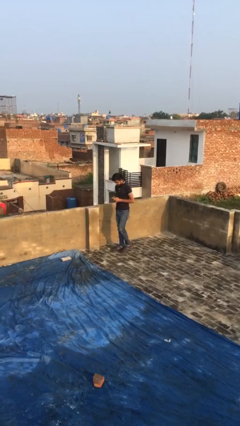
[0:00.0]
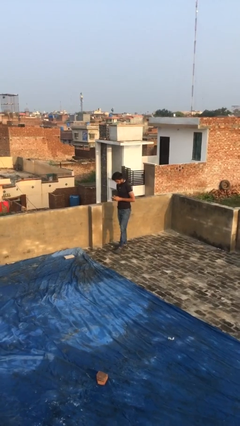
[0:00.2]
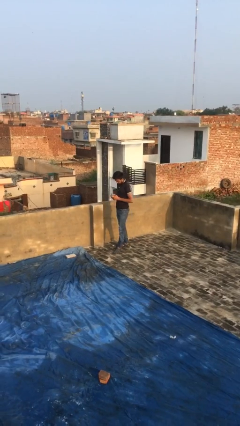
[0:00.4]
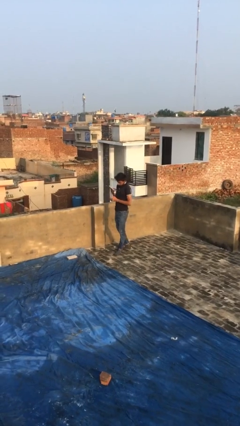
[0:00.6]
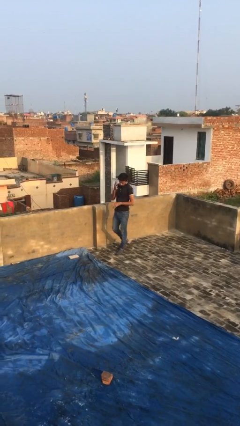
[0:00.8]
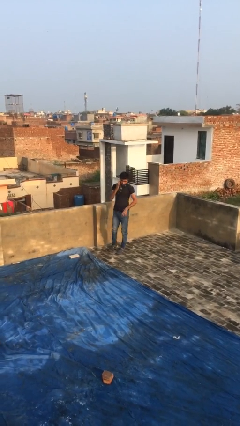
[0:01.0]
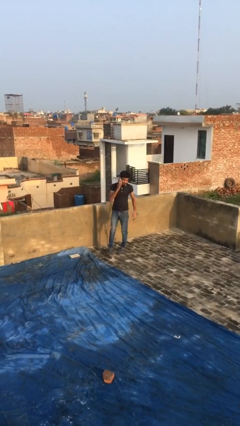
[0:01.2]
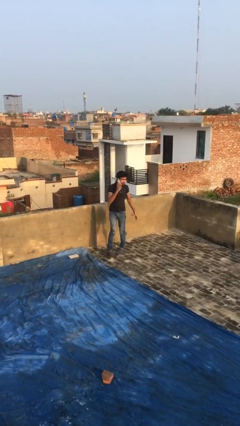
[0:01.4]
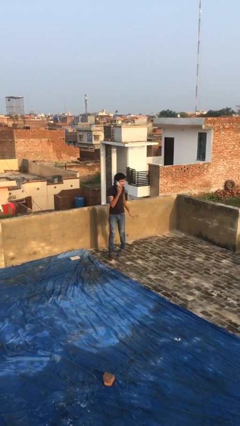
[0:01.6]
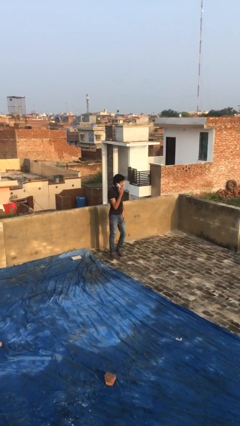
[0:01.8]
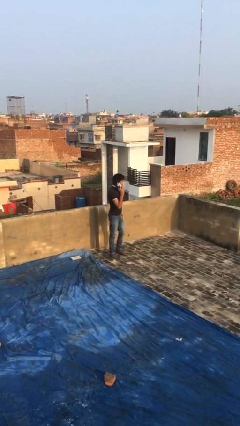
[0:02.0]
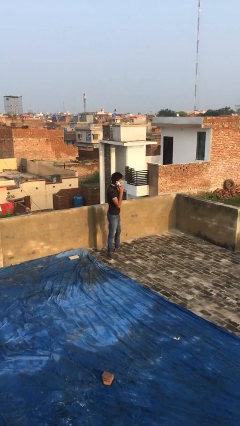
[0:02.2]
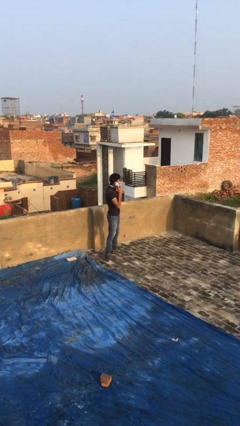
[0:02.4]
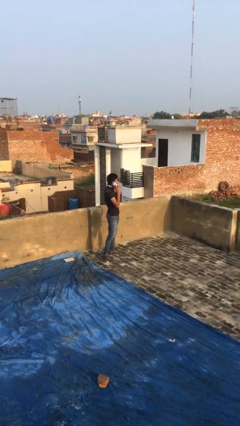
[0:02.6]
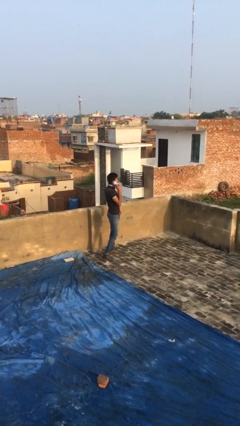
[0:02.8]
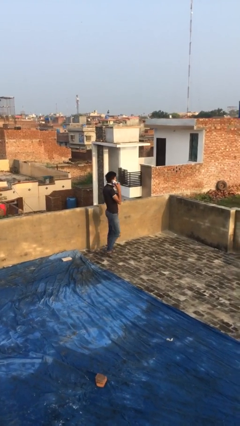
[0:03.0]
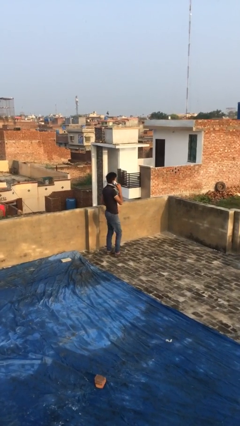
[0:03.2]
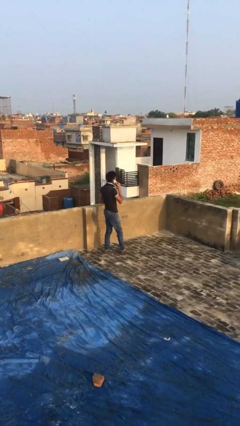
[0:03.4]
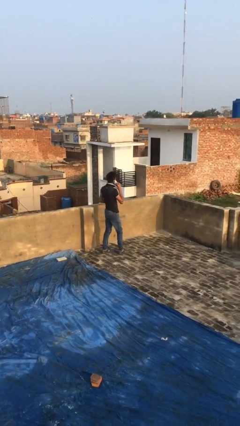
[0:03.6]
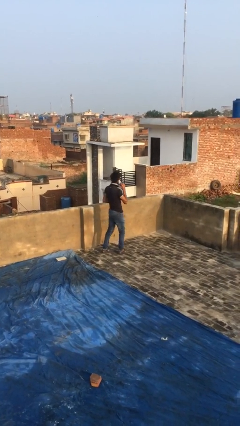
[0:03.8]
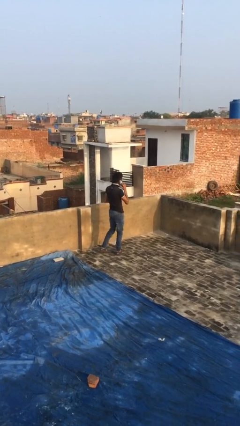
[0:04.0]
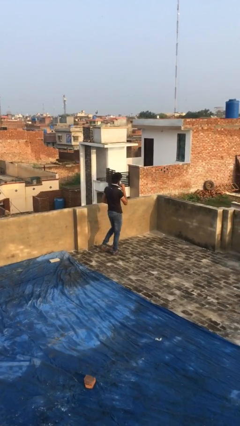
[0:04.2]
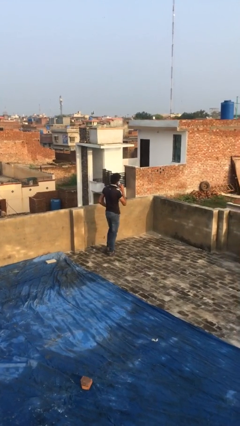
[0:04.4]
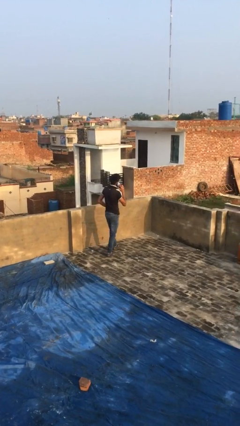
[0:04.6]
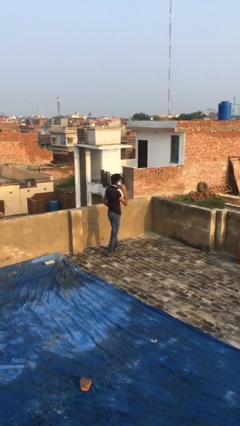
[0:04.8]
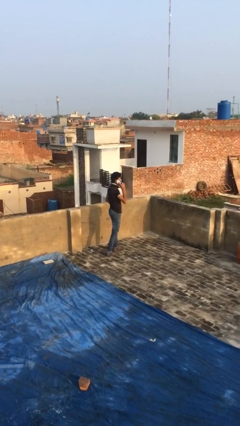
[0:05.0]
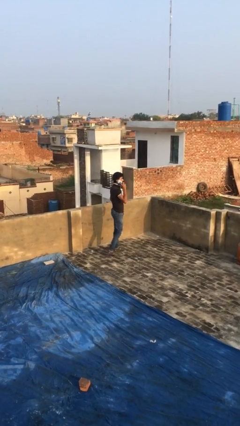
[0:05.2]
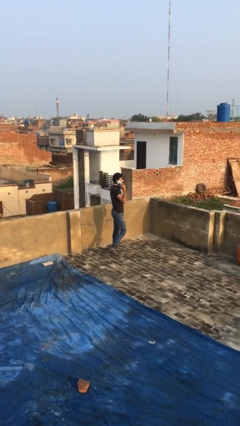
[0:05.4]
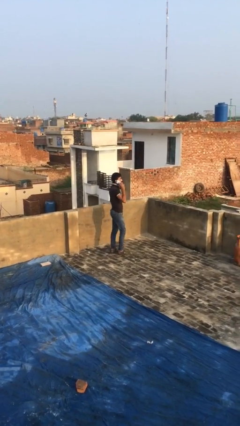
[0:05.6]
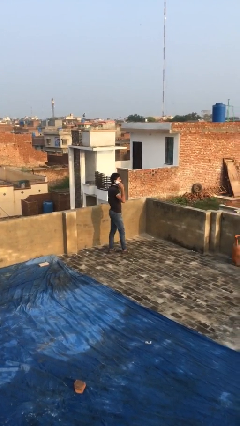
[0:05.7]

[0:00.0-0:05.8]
person talks on phone

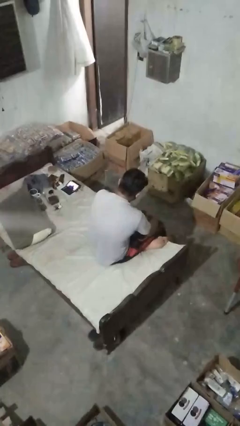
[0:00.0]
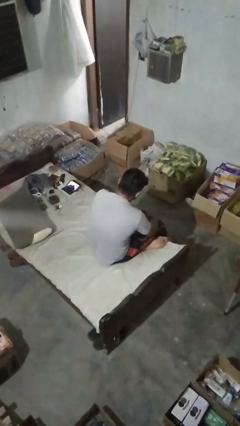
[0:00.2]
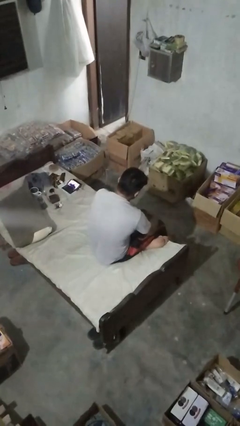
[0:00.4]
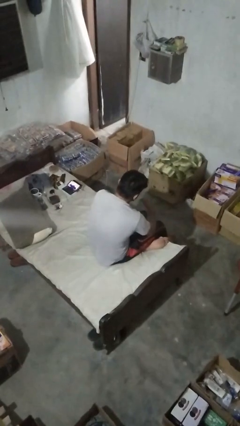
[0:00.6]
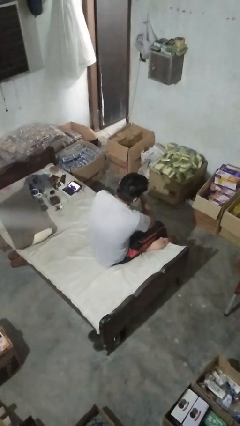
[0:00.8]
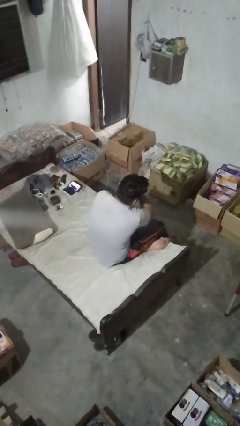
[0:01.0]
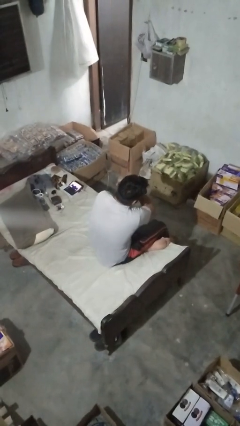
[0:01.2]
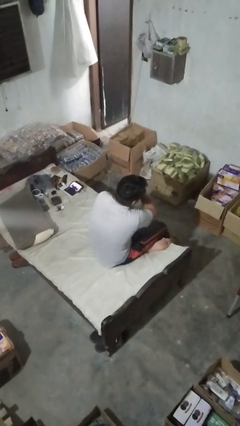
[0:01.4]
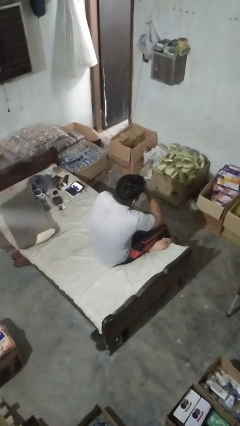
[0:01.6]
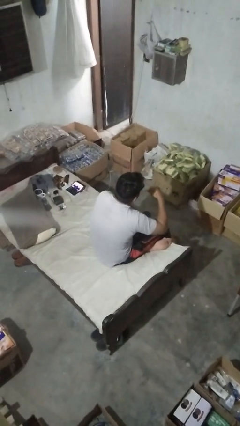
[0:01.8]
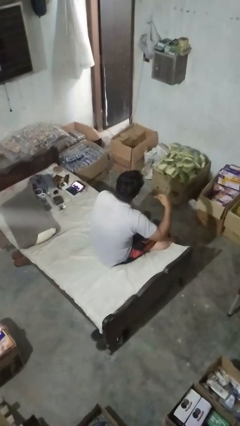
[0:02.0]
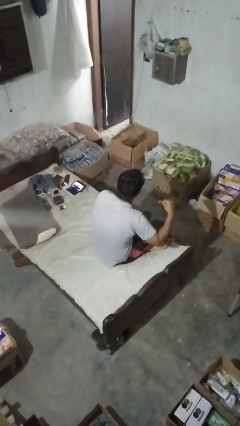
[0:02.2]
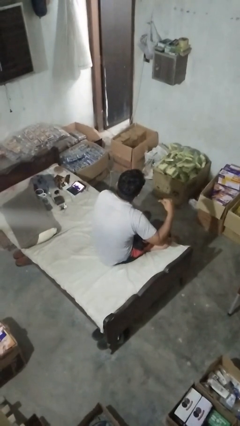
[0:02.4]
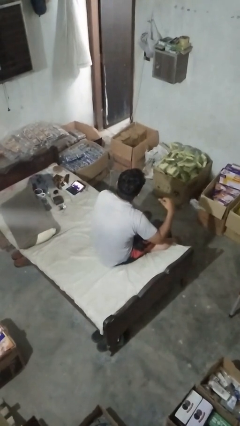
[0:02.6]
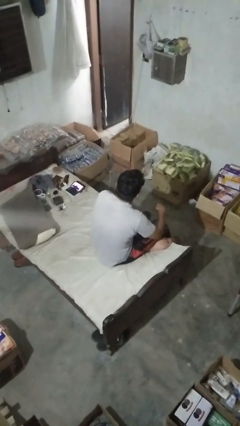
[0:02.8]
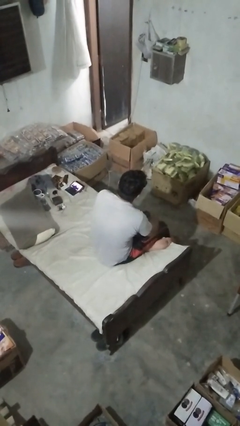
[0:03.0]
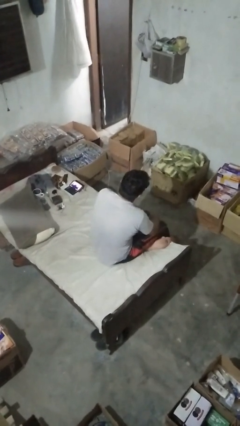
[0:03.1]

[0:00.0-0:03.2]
person gestures cut

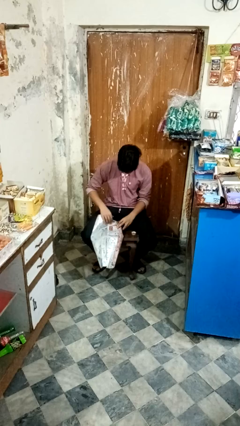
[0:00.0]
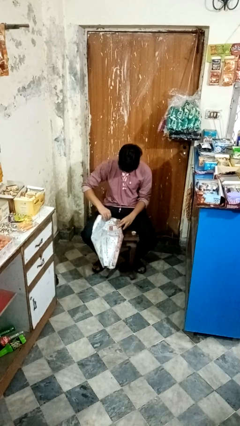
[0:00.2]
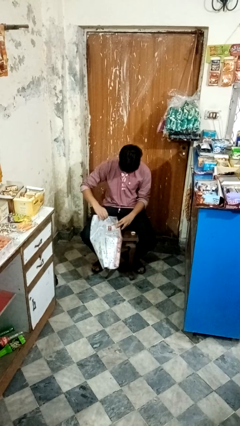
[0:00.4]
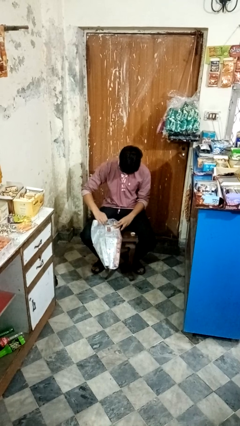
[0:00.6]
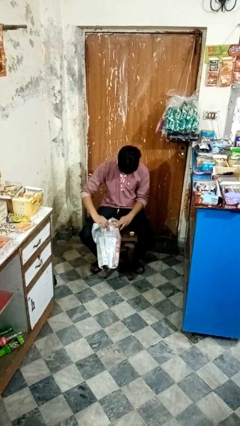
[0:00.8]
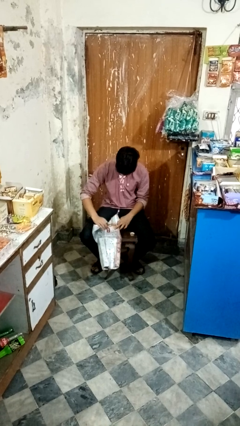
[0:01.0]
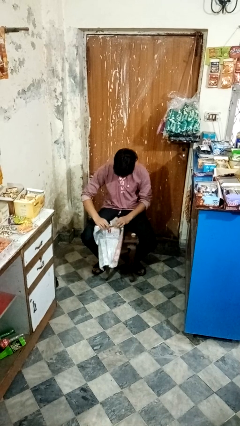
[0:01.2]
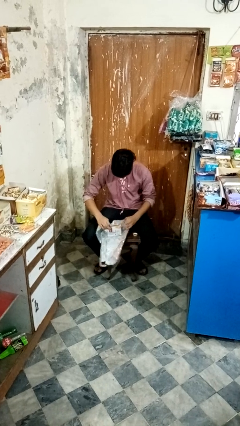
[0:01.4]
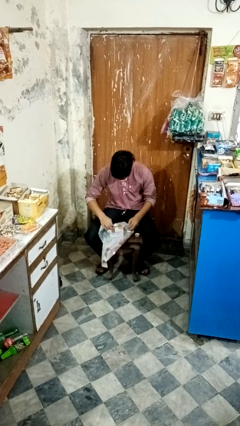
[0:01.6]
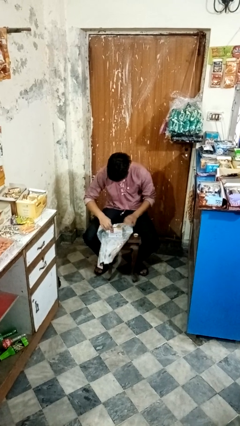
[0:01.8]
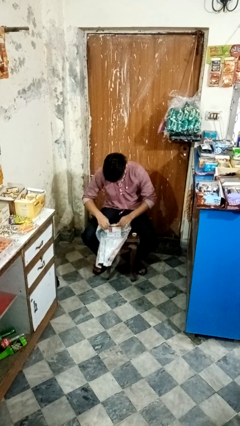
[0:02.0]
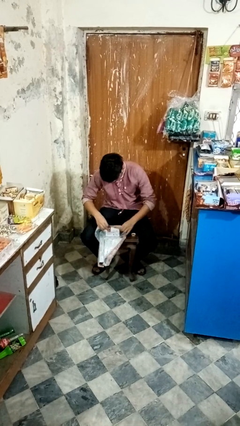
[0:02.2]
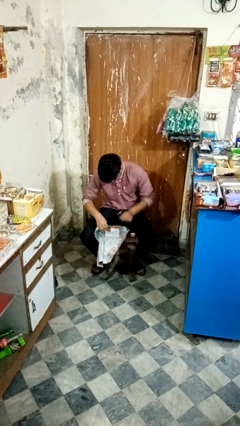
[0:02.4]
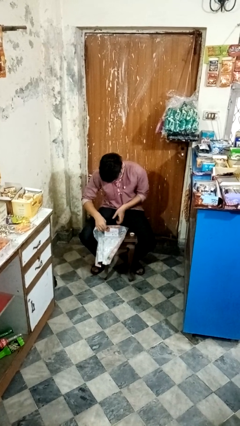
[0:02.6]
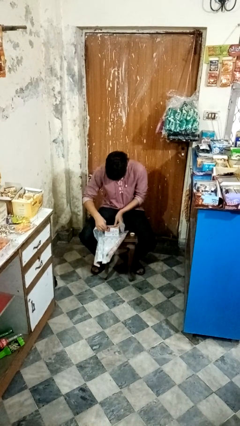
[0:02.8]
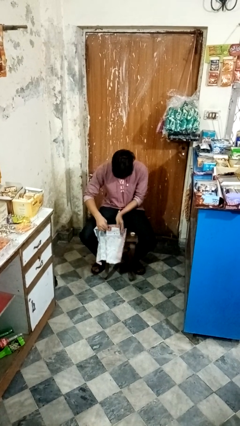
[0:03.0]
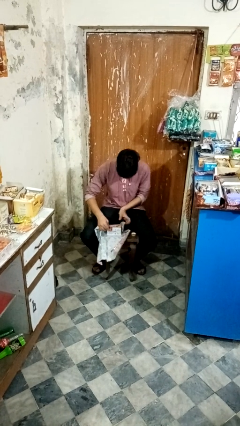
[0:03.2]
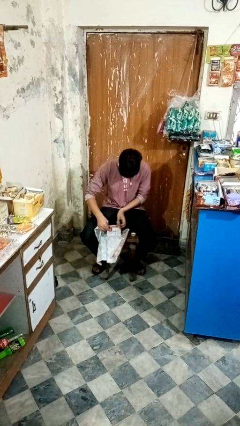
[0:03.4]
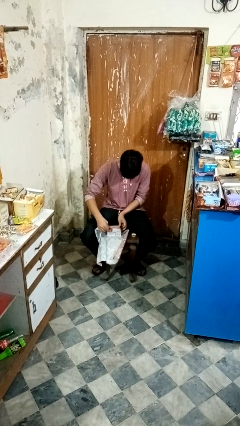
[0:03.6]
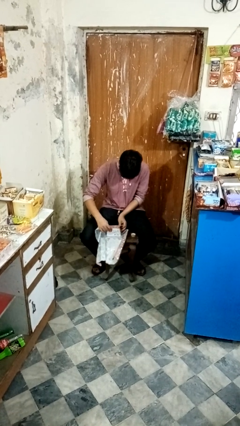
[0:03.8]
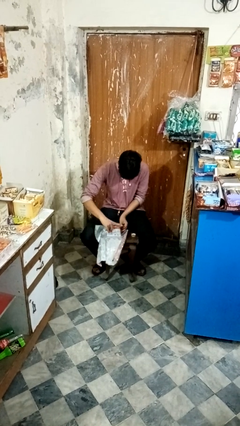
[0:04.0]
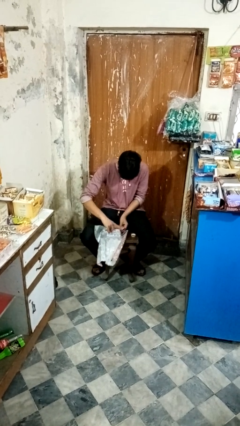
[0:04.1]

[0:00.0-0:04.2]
person wraps box

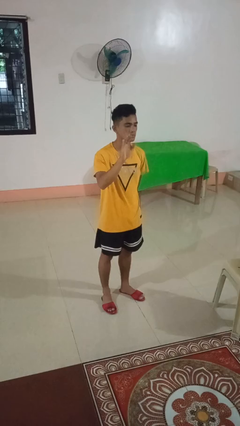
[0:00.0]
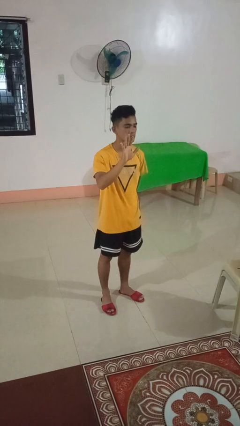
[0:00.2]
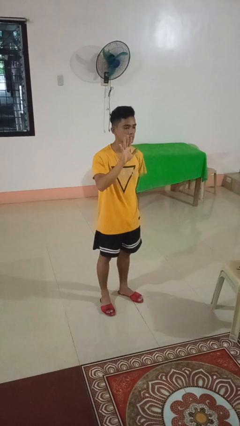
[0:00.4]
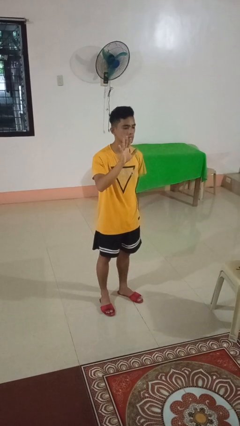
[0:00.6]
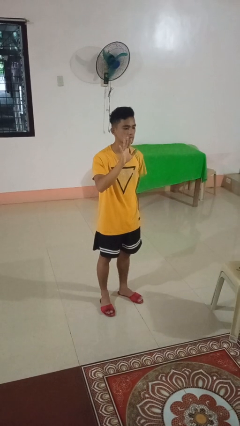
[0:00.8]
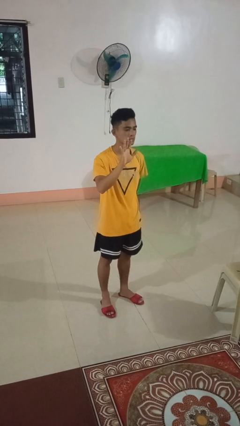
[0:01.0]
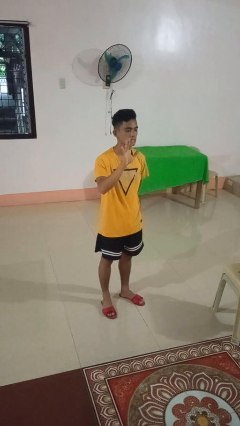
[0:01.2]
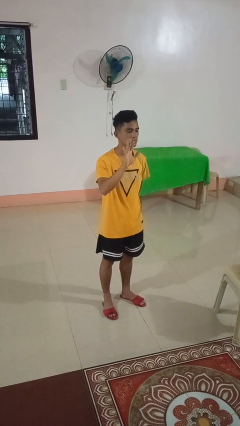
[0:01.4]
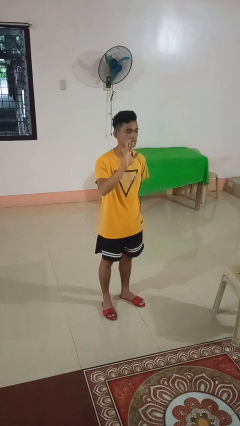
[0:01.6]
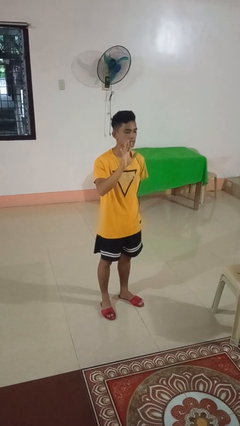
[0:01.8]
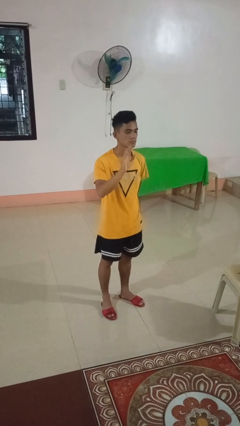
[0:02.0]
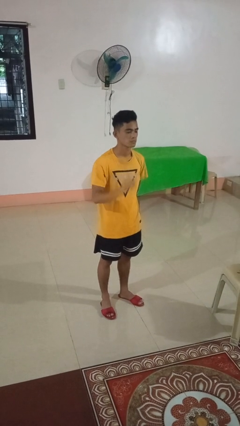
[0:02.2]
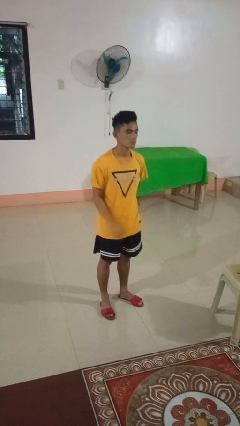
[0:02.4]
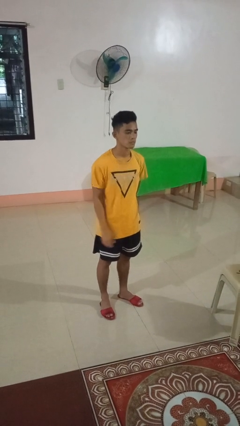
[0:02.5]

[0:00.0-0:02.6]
person gestures number five

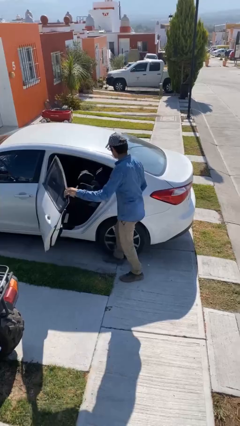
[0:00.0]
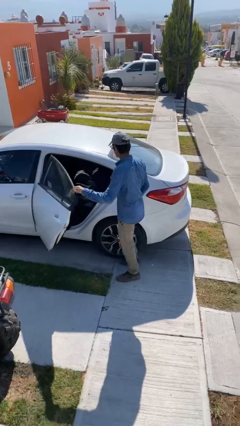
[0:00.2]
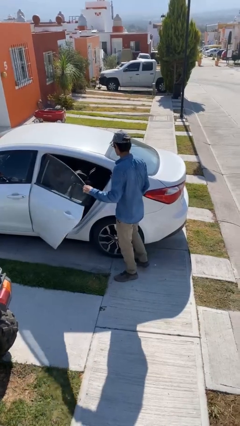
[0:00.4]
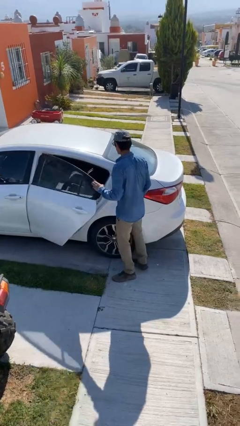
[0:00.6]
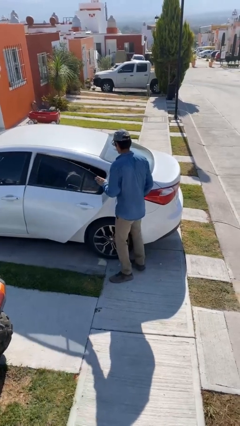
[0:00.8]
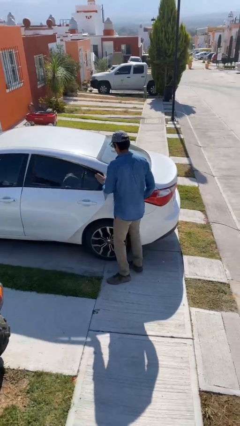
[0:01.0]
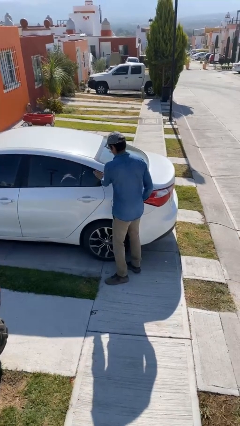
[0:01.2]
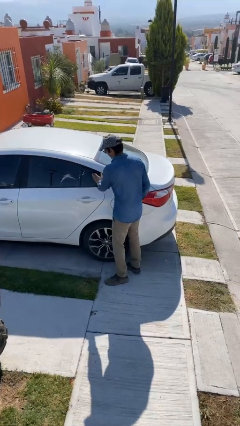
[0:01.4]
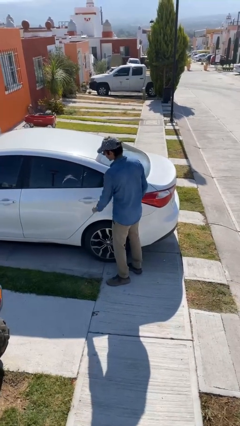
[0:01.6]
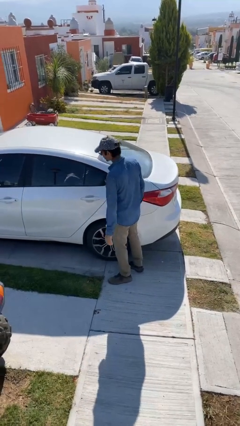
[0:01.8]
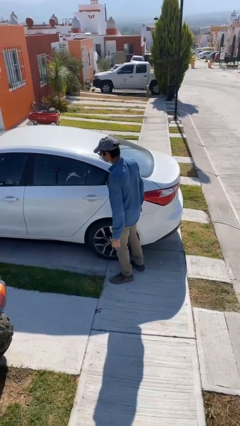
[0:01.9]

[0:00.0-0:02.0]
person closes car door
